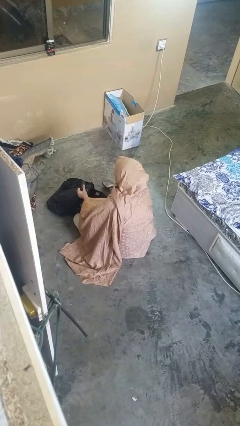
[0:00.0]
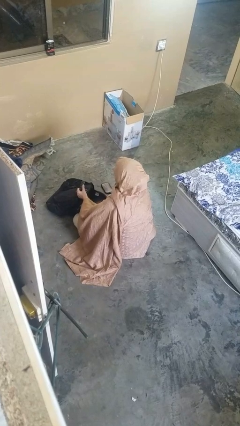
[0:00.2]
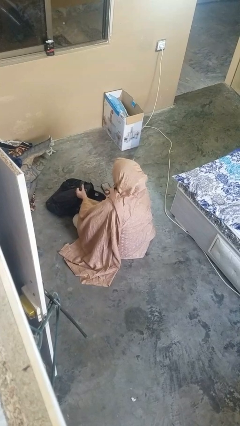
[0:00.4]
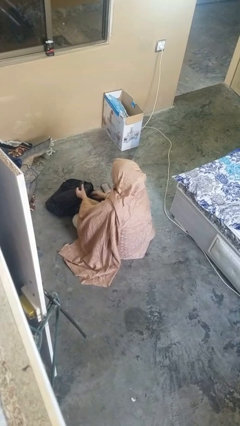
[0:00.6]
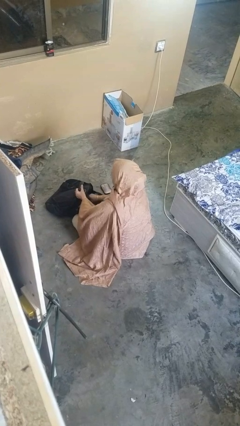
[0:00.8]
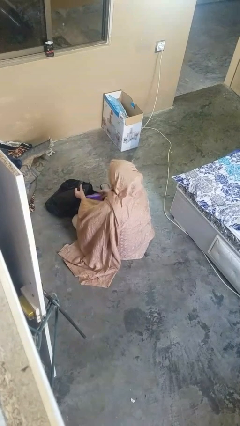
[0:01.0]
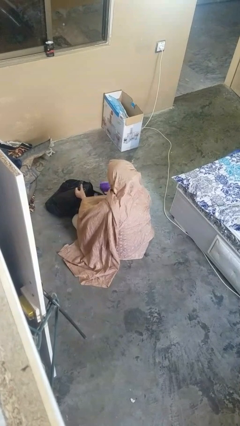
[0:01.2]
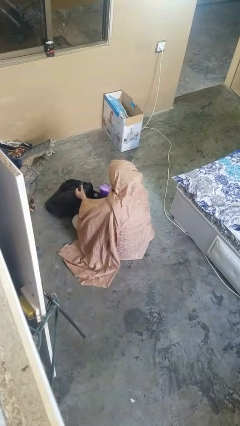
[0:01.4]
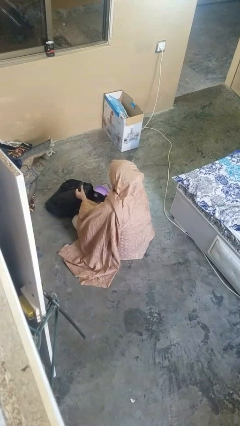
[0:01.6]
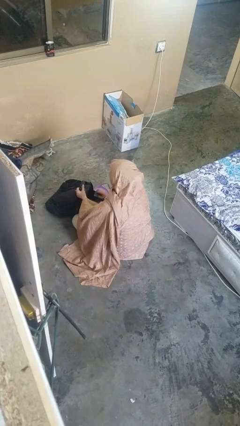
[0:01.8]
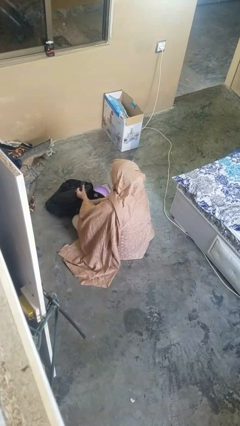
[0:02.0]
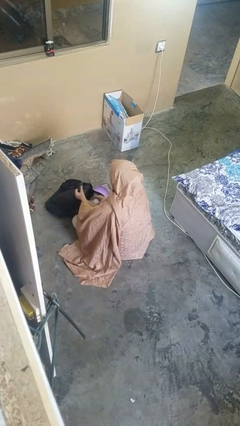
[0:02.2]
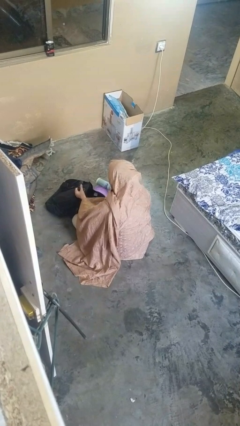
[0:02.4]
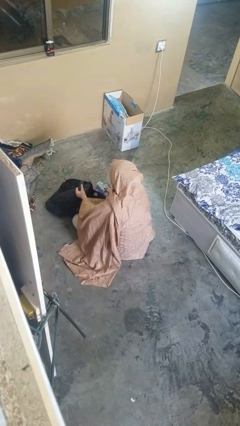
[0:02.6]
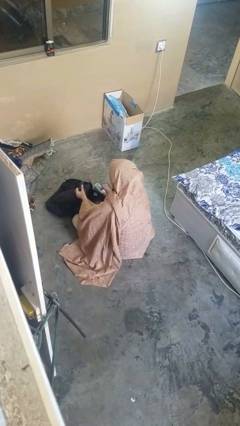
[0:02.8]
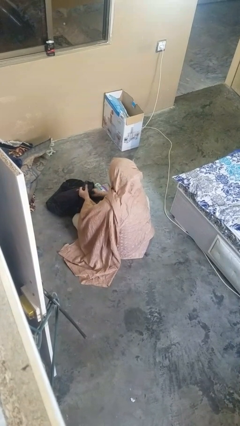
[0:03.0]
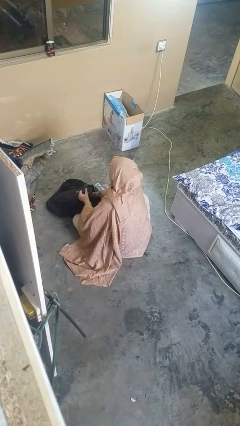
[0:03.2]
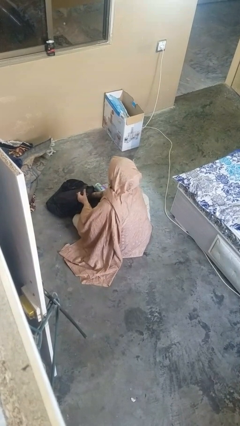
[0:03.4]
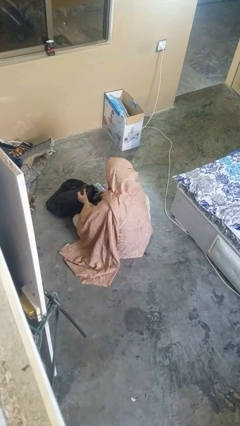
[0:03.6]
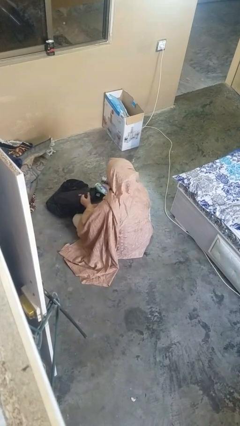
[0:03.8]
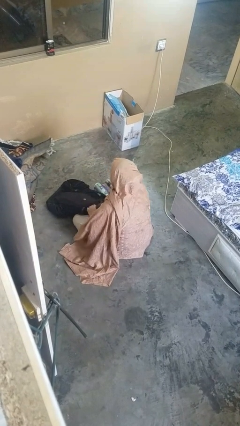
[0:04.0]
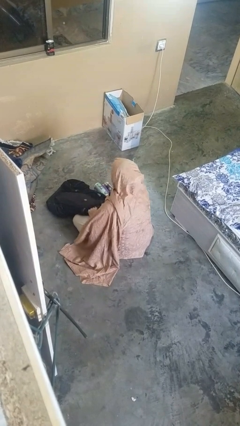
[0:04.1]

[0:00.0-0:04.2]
person takes object from backpack

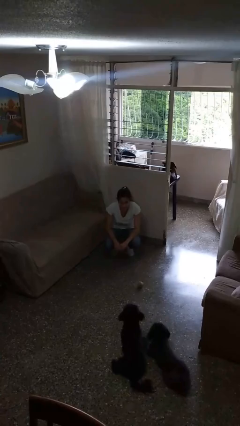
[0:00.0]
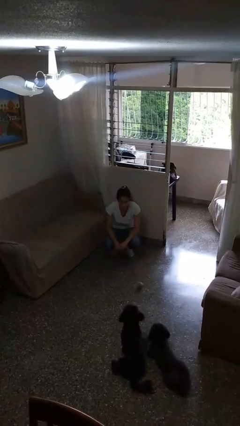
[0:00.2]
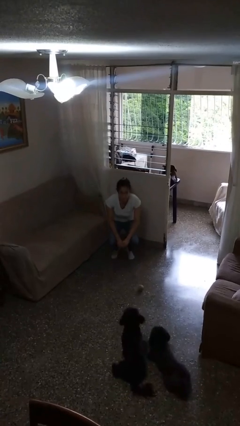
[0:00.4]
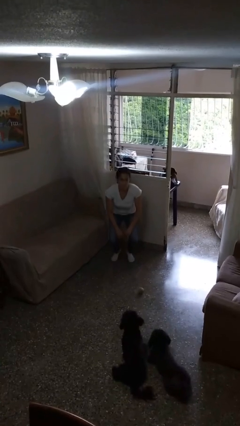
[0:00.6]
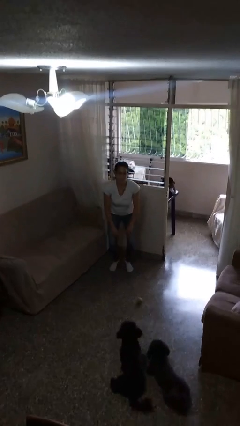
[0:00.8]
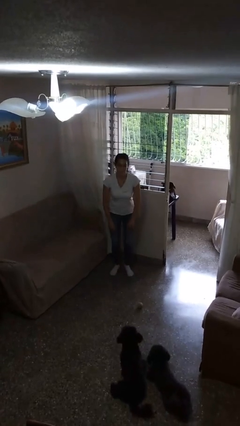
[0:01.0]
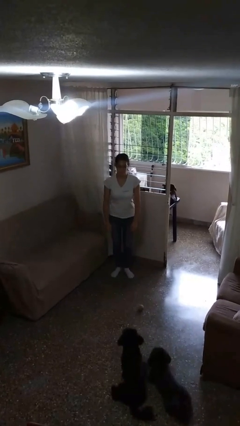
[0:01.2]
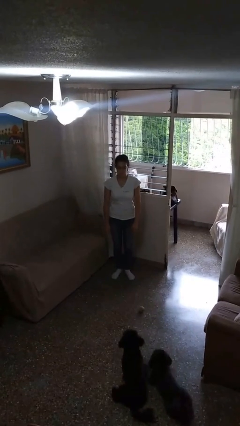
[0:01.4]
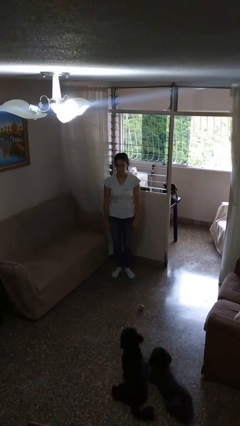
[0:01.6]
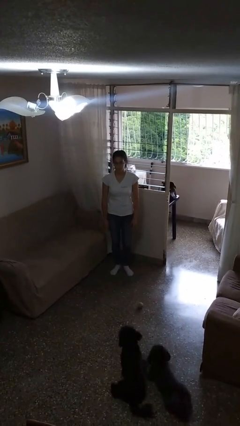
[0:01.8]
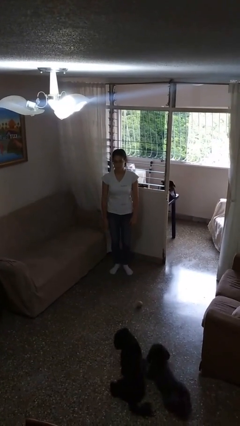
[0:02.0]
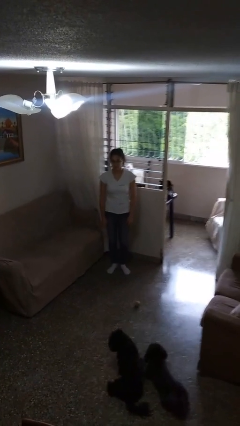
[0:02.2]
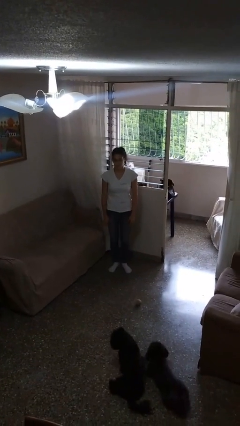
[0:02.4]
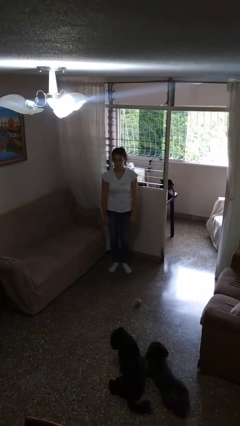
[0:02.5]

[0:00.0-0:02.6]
person stands up

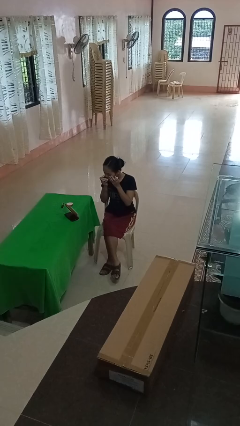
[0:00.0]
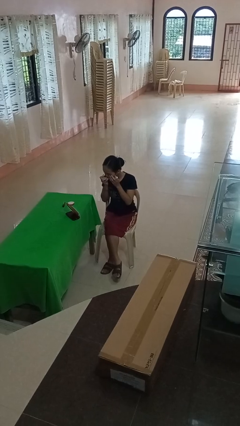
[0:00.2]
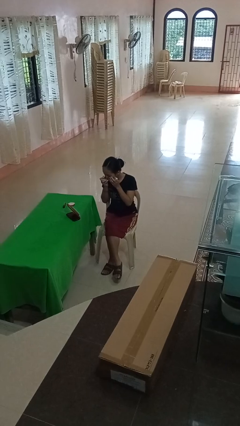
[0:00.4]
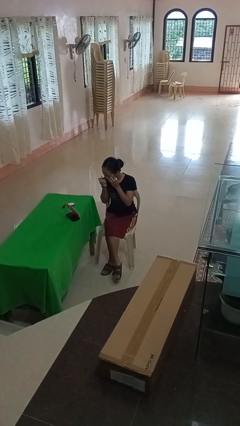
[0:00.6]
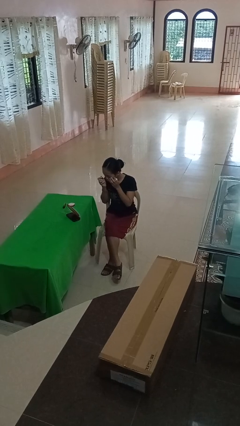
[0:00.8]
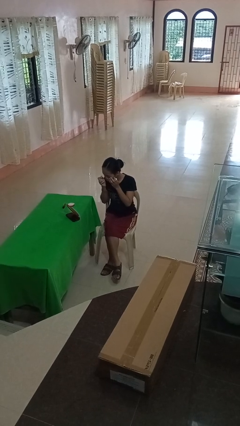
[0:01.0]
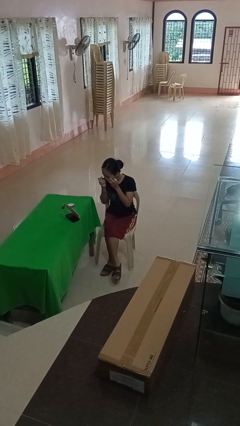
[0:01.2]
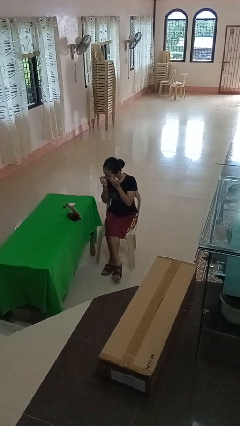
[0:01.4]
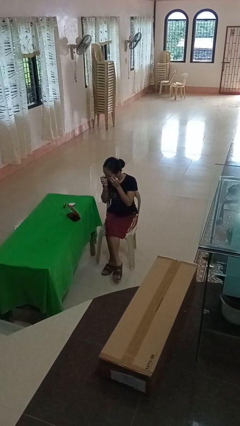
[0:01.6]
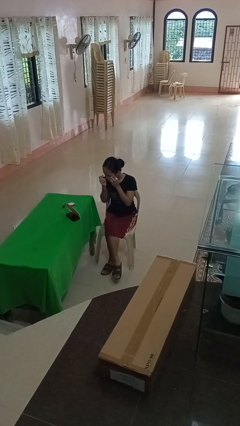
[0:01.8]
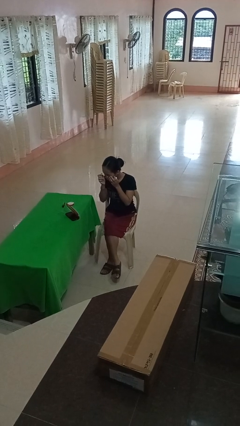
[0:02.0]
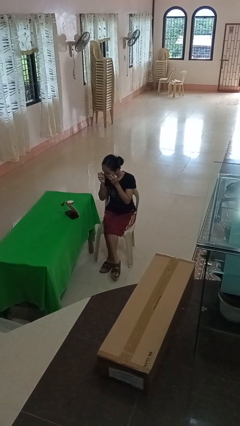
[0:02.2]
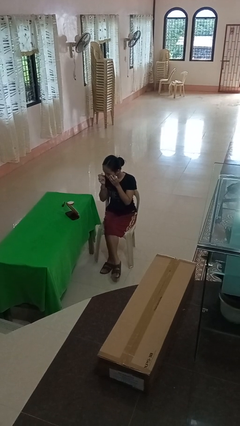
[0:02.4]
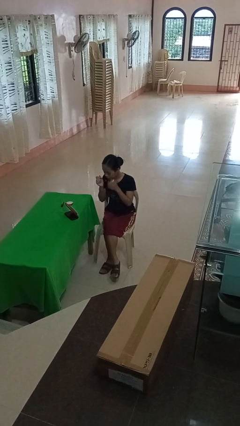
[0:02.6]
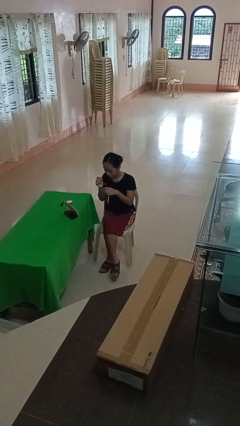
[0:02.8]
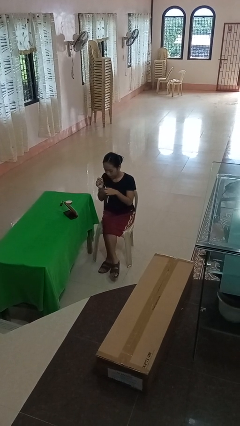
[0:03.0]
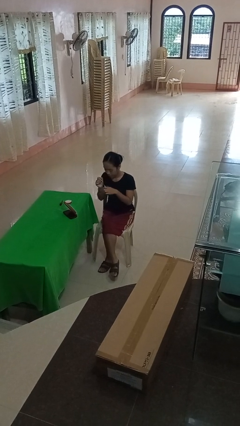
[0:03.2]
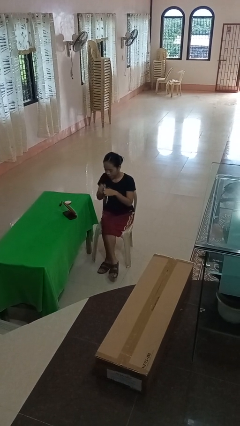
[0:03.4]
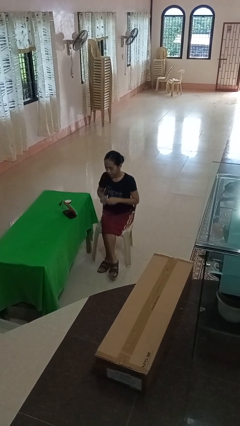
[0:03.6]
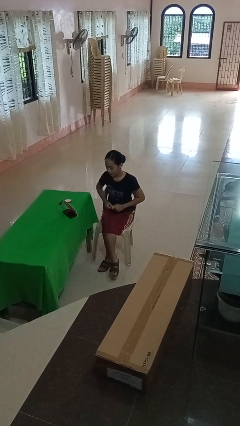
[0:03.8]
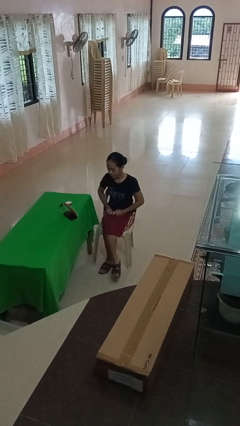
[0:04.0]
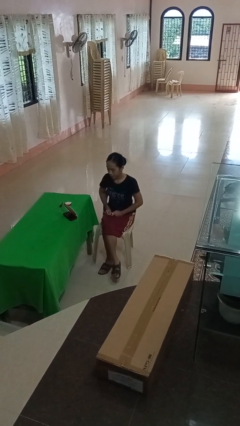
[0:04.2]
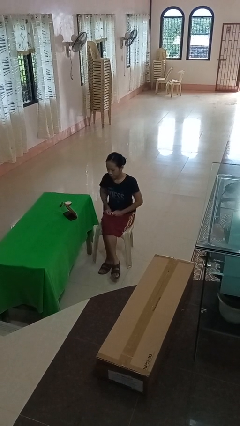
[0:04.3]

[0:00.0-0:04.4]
person applies eye makeup

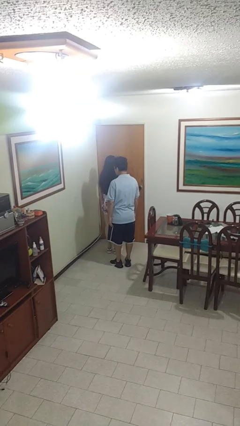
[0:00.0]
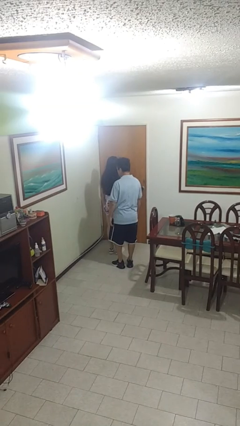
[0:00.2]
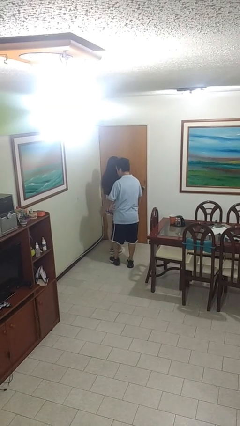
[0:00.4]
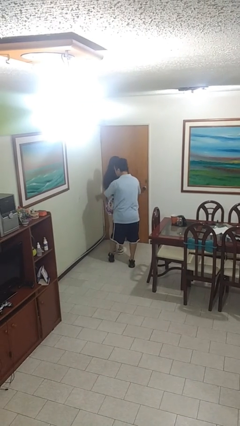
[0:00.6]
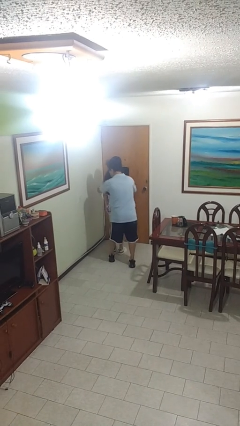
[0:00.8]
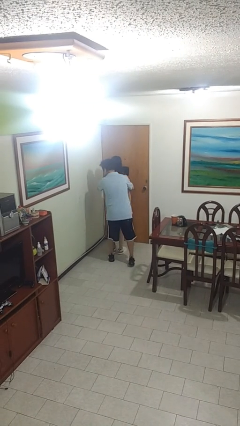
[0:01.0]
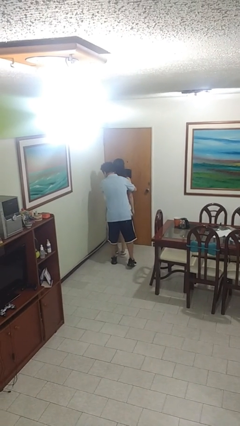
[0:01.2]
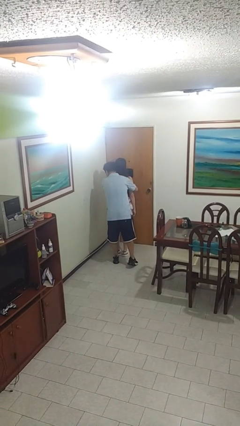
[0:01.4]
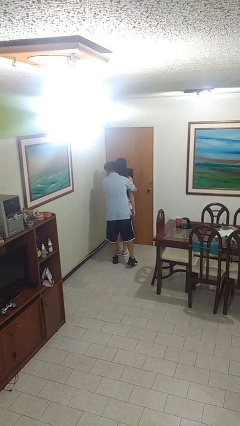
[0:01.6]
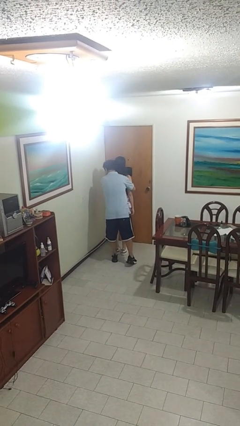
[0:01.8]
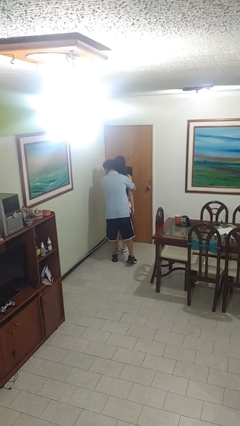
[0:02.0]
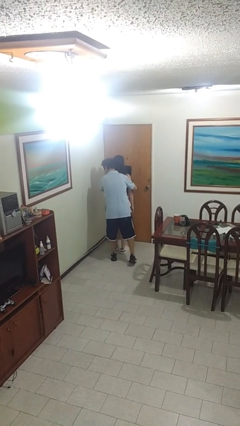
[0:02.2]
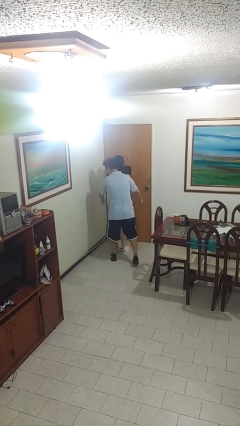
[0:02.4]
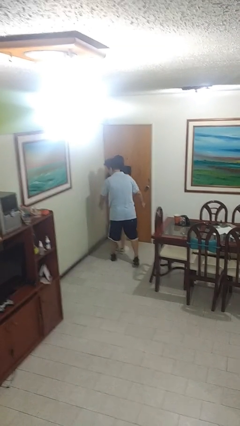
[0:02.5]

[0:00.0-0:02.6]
person hugs person from behind

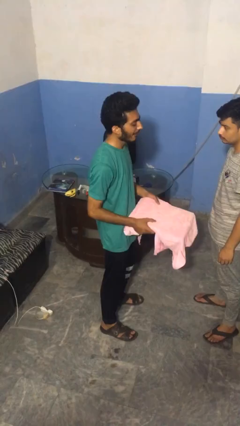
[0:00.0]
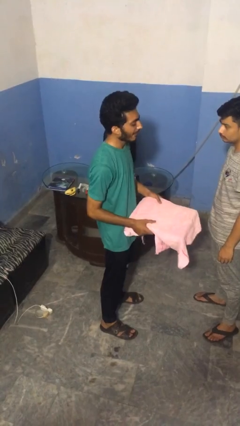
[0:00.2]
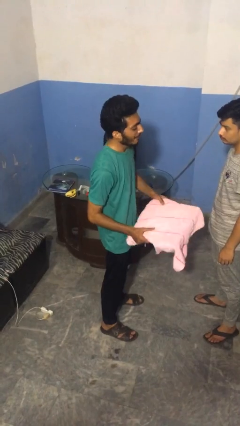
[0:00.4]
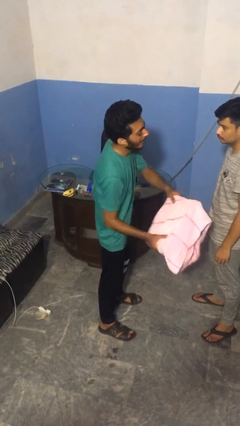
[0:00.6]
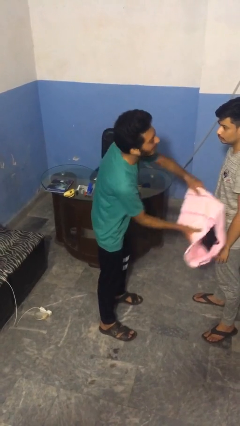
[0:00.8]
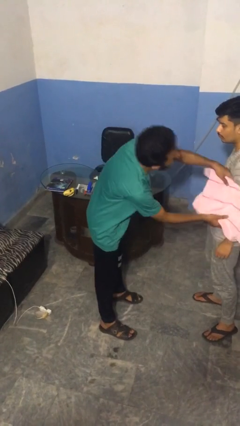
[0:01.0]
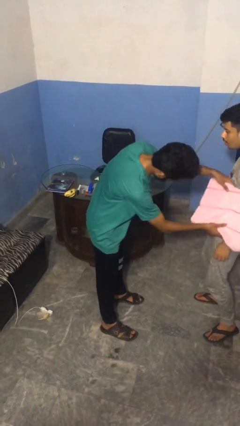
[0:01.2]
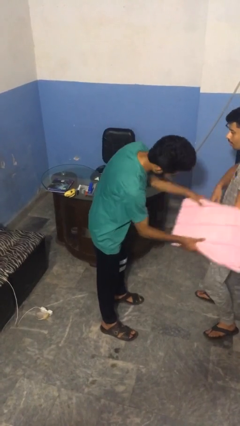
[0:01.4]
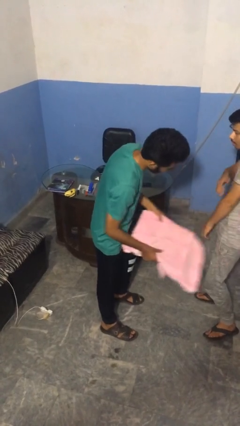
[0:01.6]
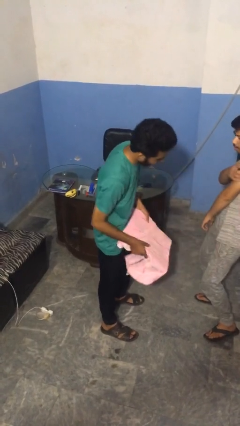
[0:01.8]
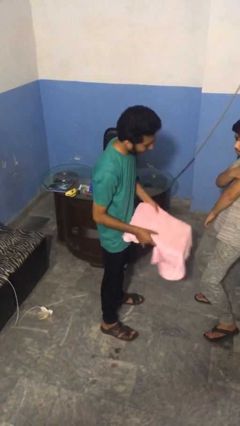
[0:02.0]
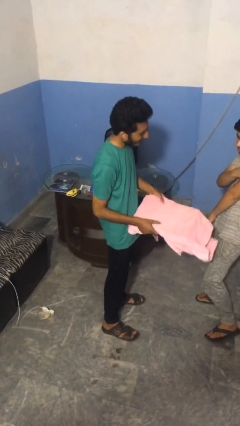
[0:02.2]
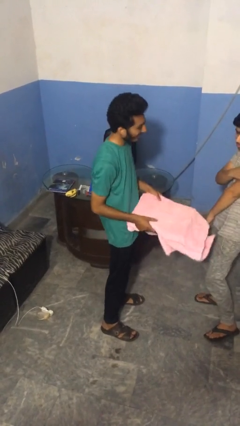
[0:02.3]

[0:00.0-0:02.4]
person hits person with pillow

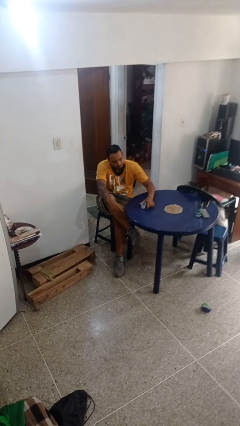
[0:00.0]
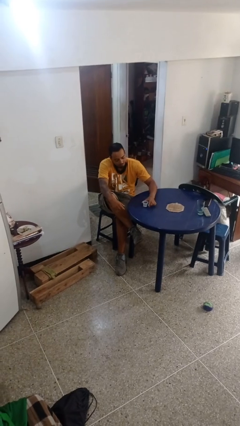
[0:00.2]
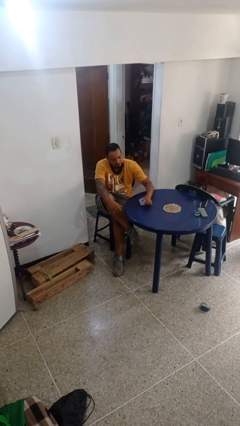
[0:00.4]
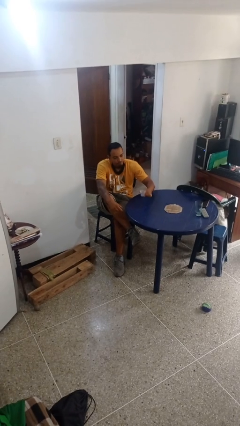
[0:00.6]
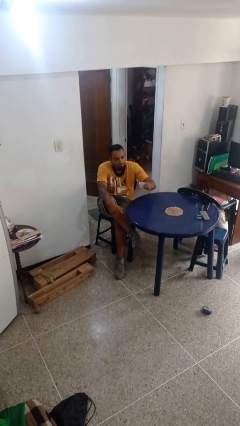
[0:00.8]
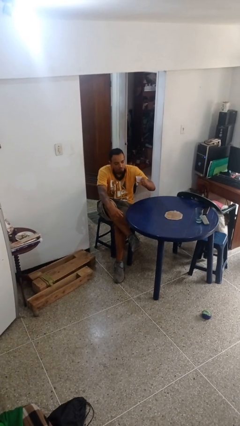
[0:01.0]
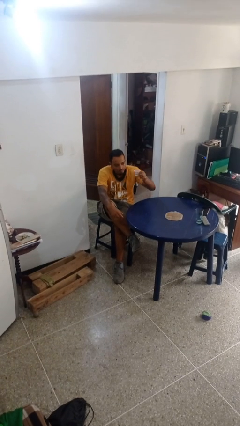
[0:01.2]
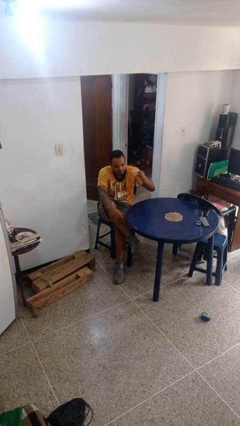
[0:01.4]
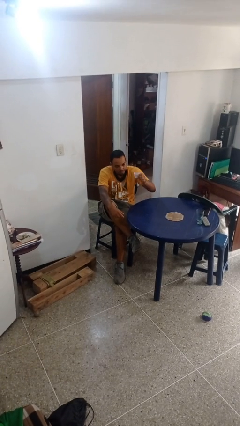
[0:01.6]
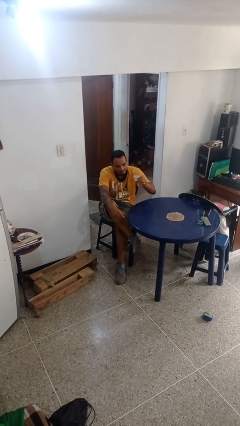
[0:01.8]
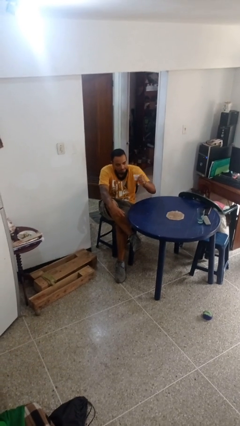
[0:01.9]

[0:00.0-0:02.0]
person picks up object from table
